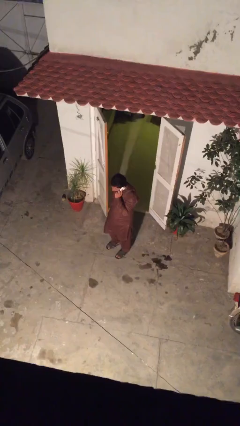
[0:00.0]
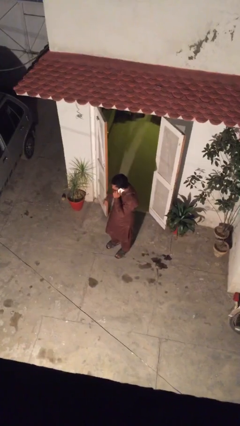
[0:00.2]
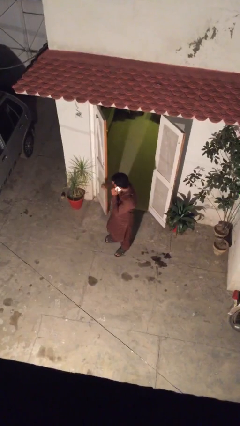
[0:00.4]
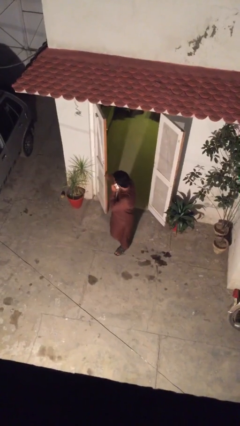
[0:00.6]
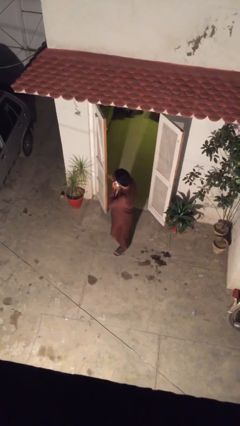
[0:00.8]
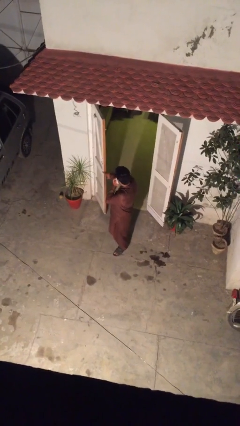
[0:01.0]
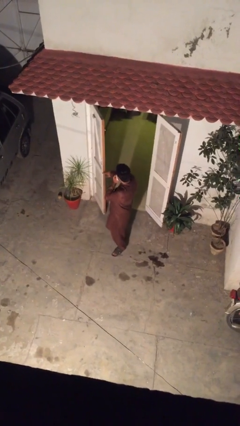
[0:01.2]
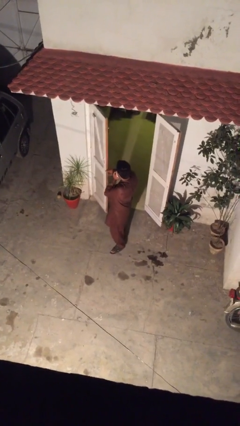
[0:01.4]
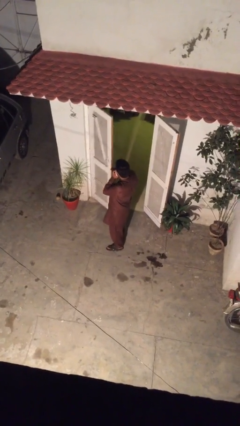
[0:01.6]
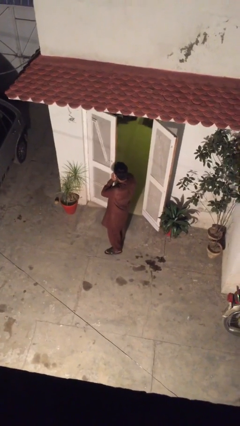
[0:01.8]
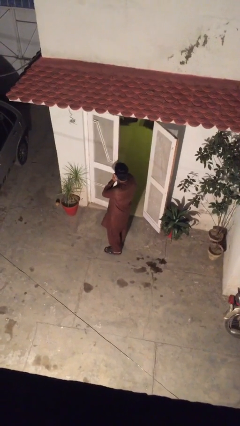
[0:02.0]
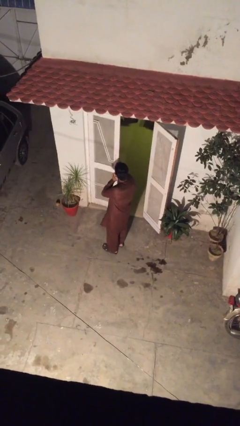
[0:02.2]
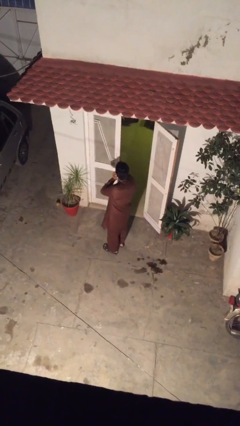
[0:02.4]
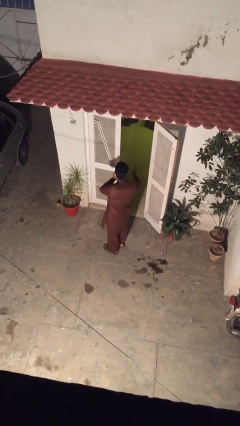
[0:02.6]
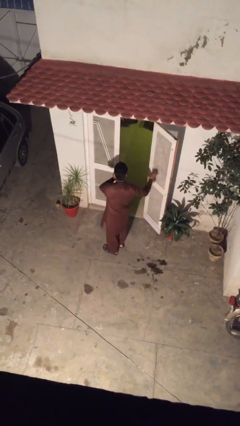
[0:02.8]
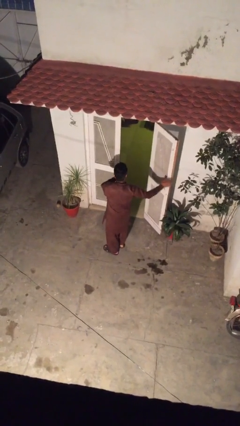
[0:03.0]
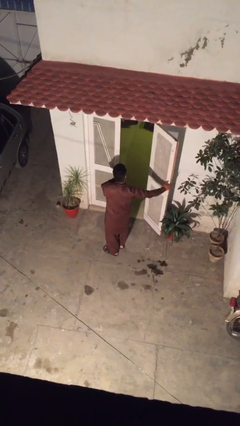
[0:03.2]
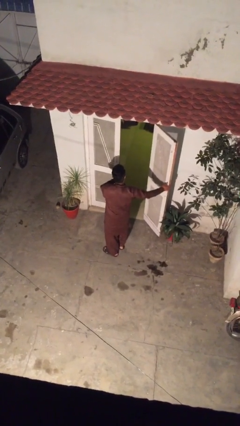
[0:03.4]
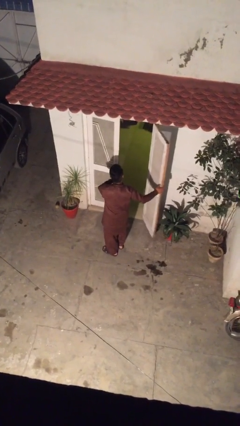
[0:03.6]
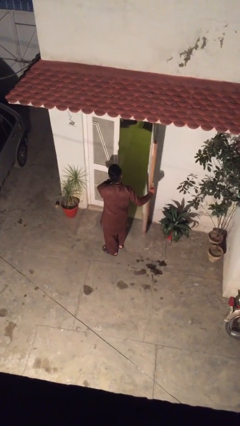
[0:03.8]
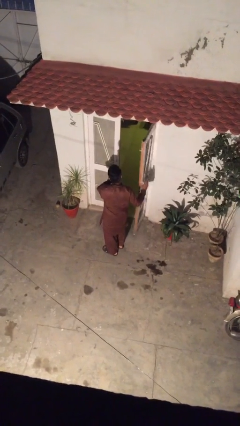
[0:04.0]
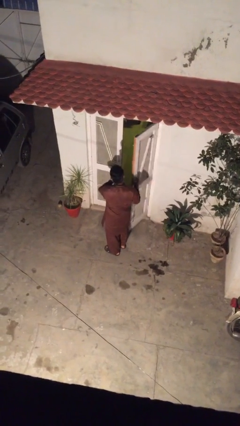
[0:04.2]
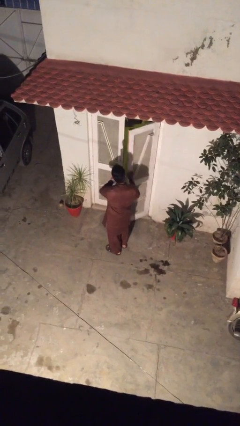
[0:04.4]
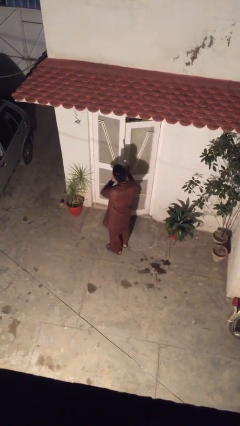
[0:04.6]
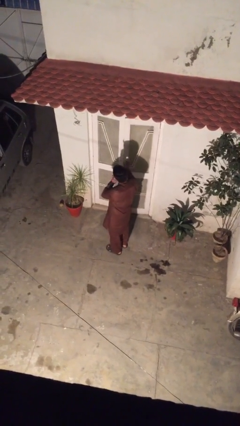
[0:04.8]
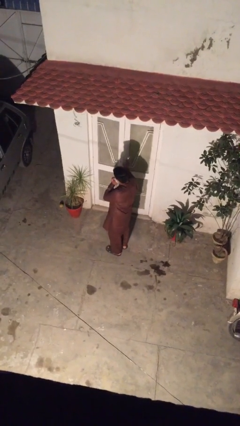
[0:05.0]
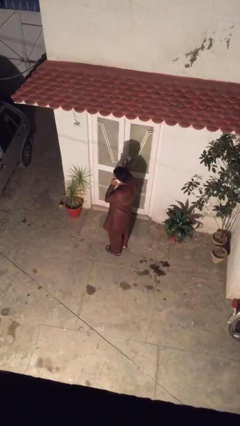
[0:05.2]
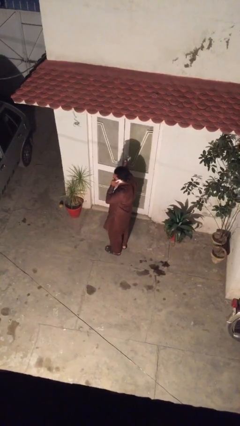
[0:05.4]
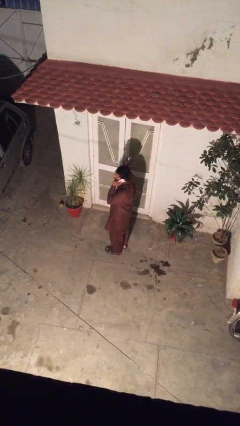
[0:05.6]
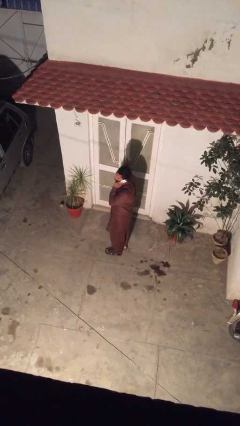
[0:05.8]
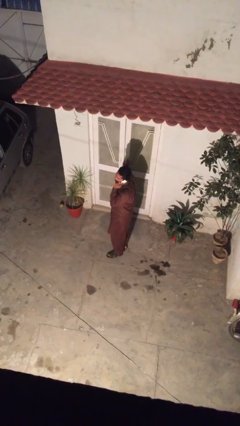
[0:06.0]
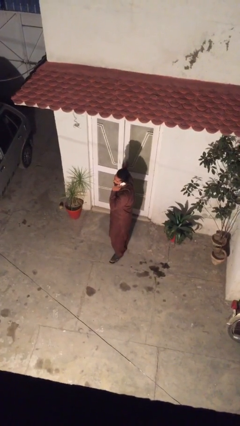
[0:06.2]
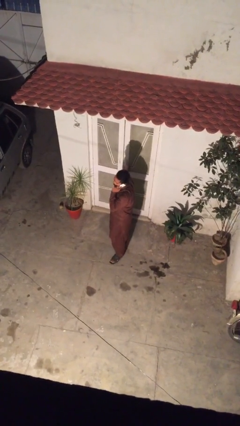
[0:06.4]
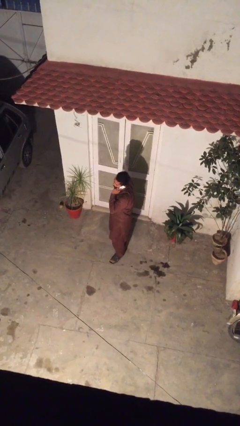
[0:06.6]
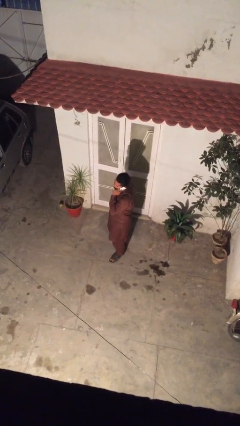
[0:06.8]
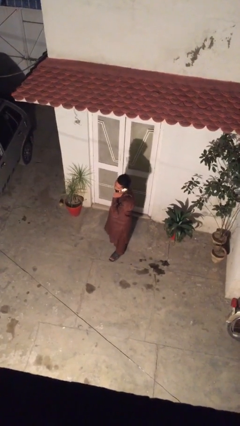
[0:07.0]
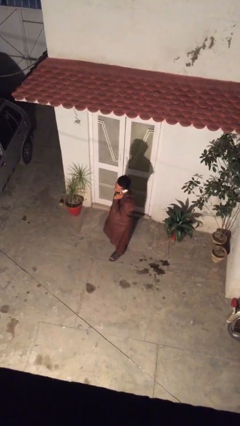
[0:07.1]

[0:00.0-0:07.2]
person closes facility door

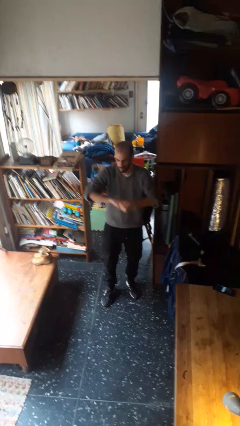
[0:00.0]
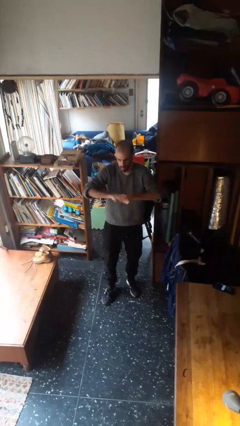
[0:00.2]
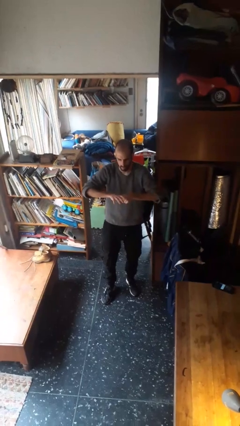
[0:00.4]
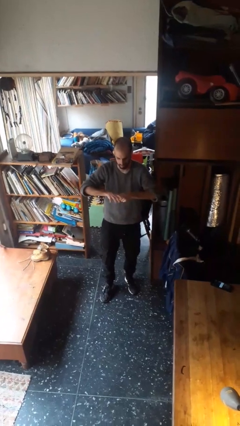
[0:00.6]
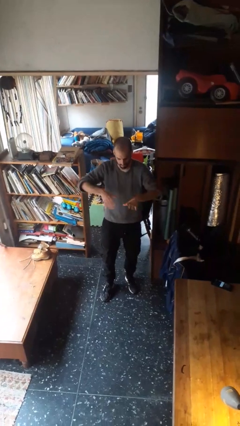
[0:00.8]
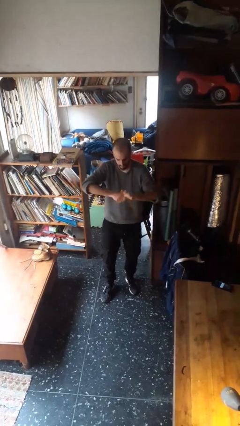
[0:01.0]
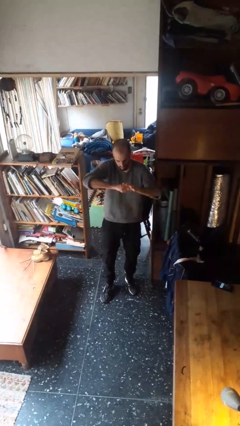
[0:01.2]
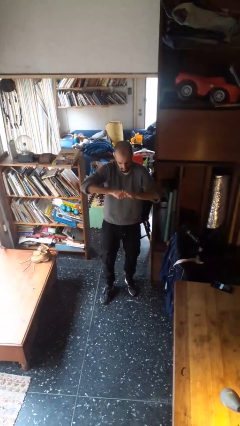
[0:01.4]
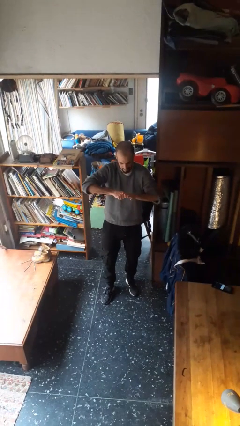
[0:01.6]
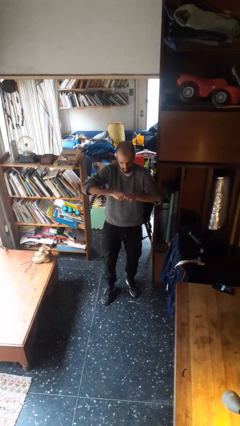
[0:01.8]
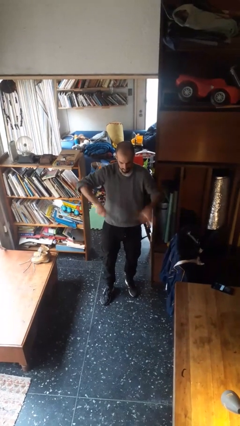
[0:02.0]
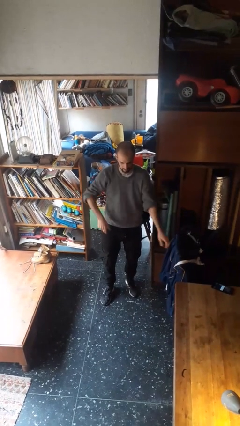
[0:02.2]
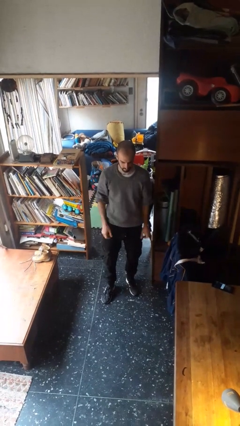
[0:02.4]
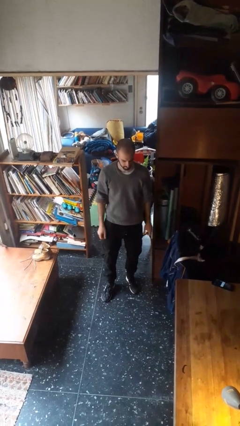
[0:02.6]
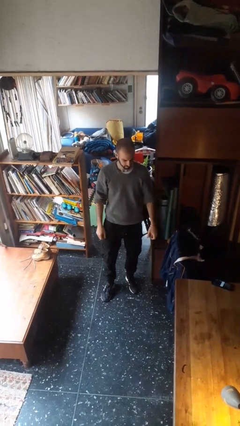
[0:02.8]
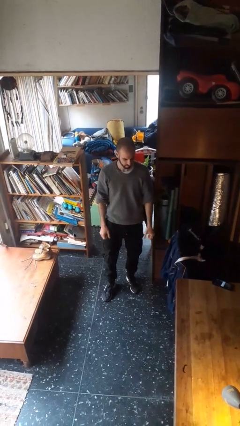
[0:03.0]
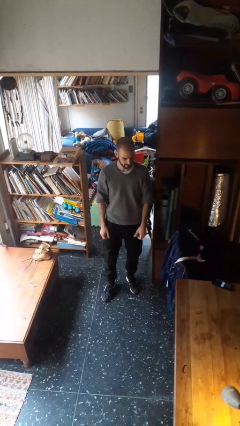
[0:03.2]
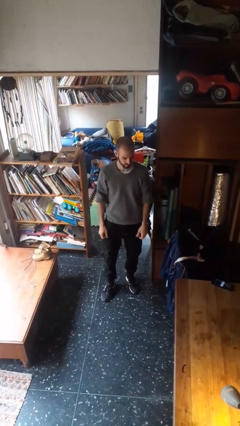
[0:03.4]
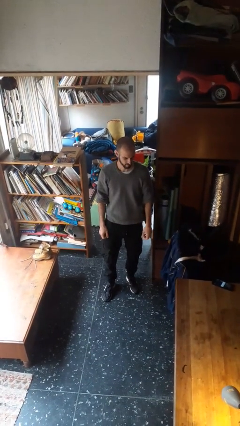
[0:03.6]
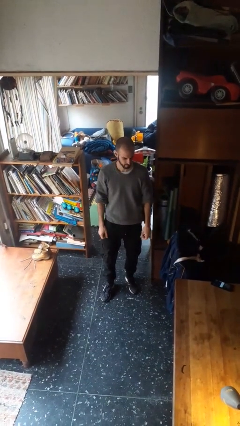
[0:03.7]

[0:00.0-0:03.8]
person cracks knuckles

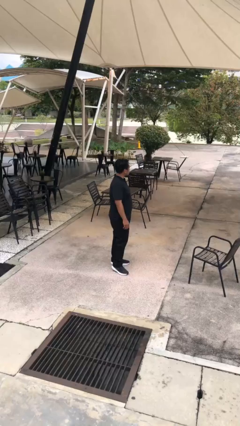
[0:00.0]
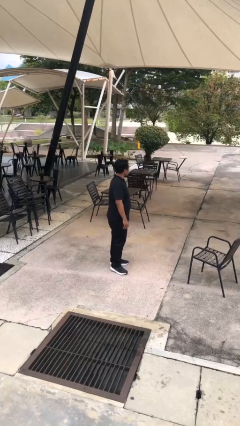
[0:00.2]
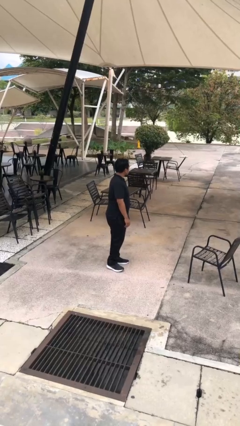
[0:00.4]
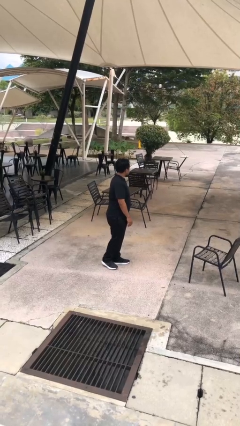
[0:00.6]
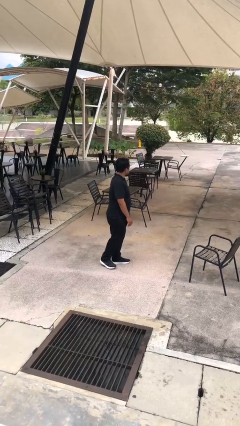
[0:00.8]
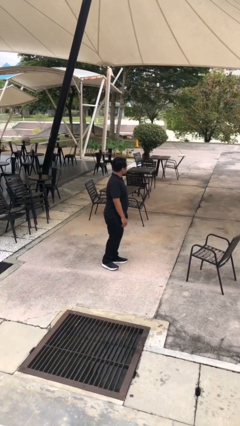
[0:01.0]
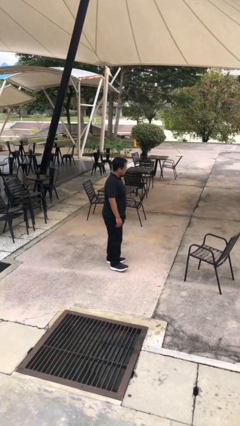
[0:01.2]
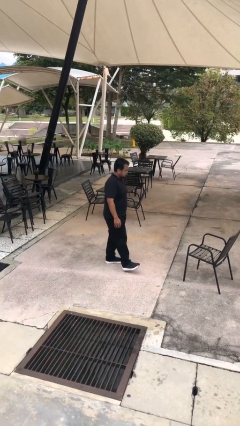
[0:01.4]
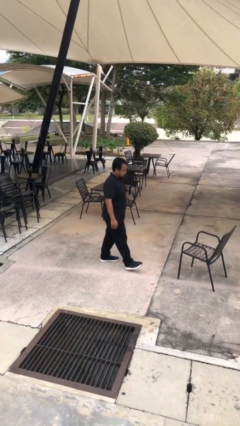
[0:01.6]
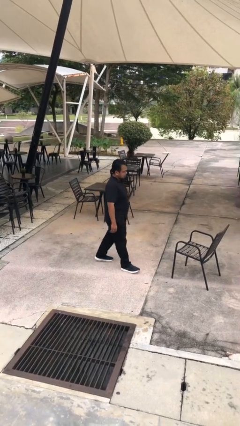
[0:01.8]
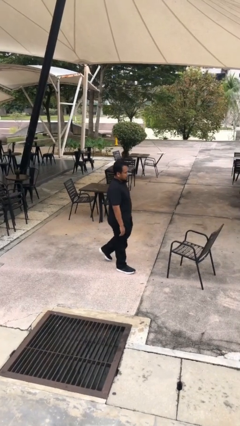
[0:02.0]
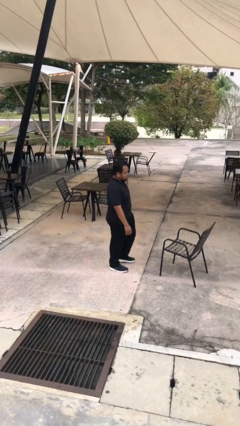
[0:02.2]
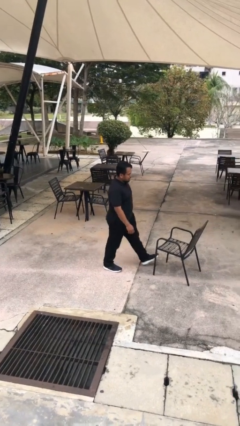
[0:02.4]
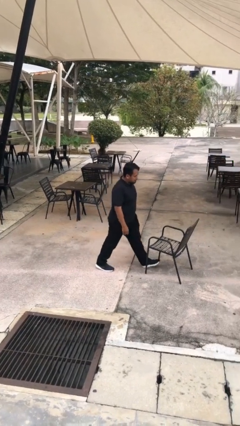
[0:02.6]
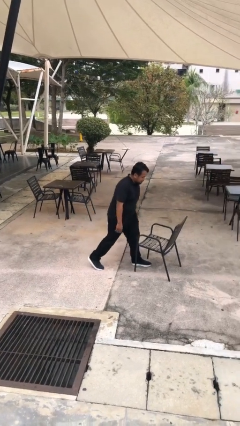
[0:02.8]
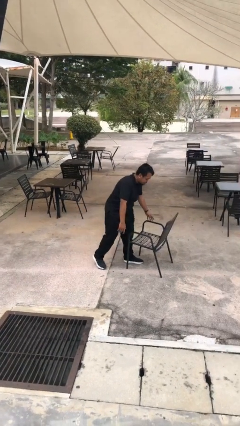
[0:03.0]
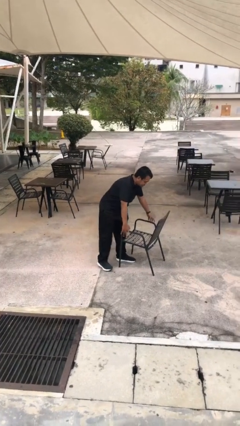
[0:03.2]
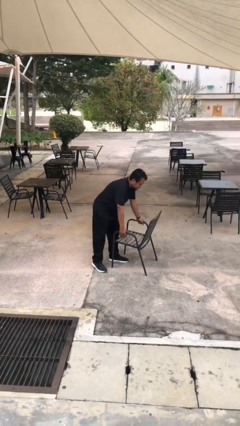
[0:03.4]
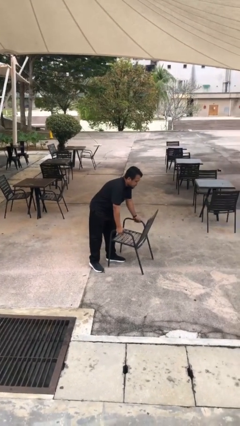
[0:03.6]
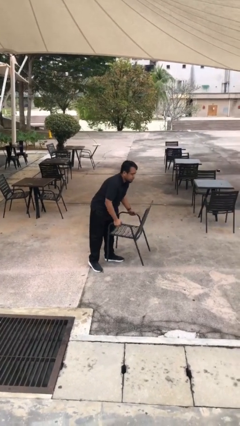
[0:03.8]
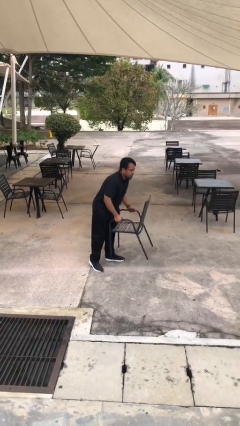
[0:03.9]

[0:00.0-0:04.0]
person picks up object from floor

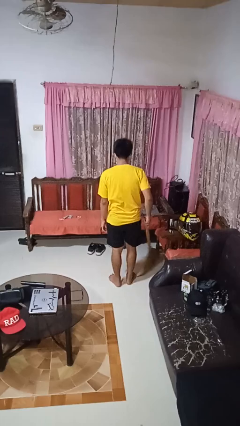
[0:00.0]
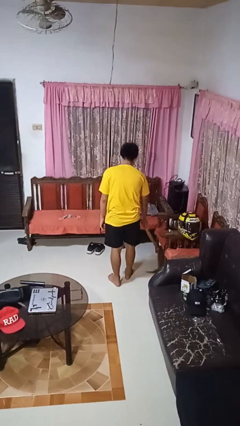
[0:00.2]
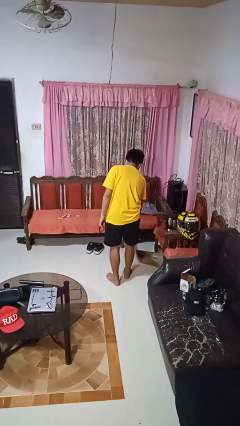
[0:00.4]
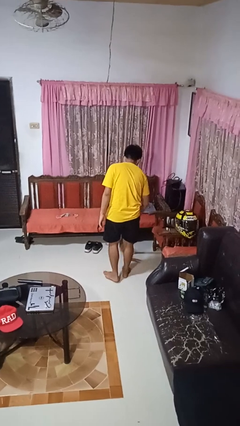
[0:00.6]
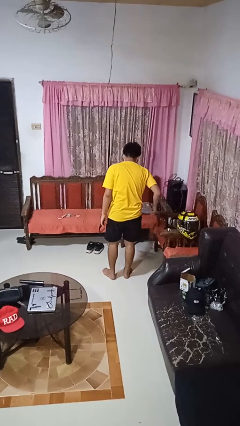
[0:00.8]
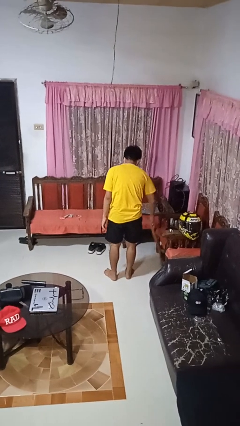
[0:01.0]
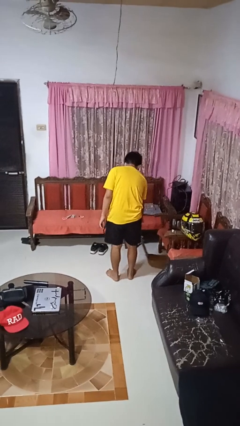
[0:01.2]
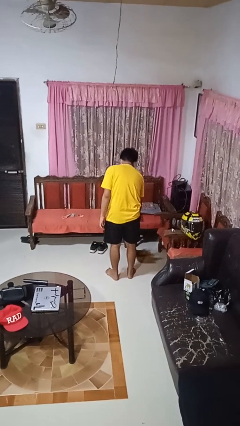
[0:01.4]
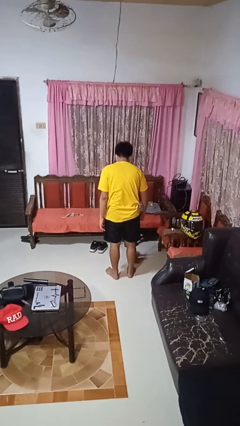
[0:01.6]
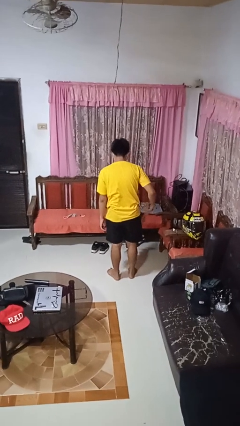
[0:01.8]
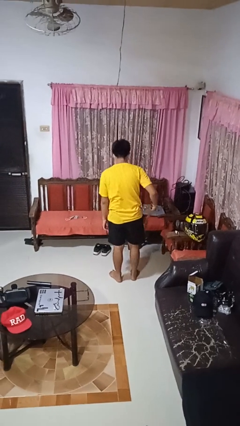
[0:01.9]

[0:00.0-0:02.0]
person sweeps floor

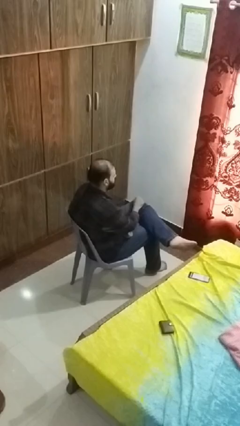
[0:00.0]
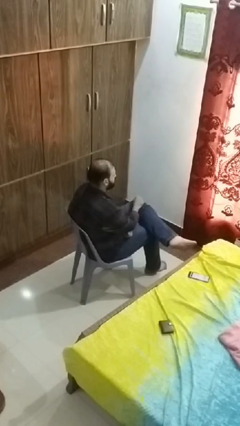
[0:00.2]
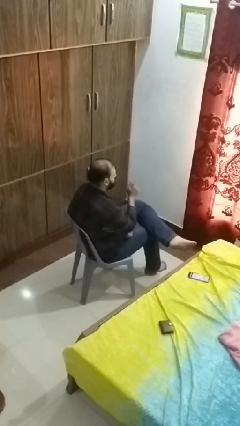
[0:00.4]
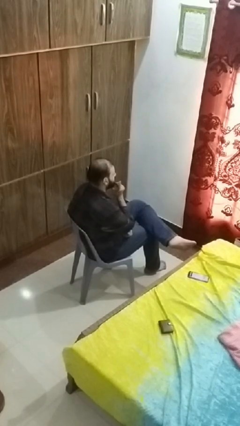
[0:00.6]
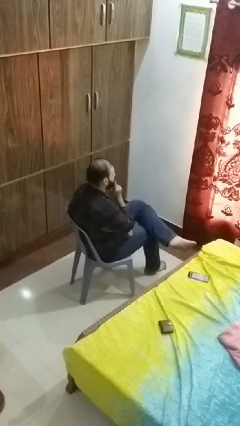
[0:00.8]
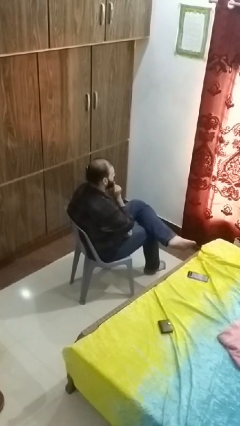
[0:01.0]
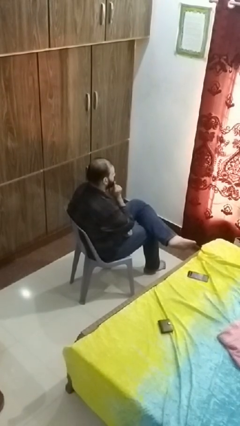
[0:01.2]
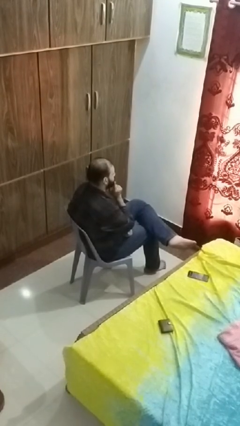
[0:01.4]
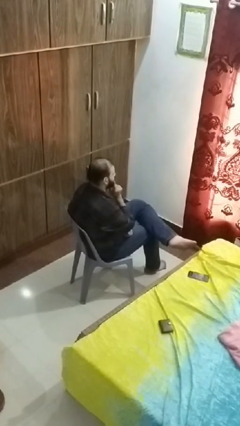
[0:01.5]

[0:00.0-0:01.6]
person strokes chin
